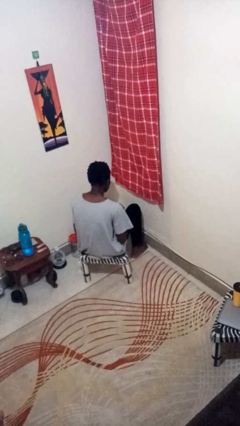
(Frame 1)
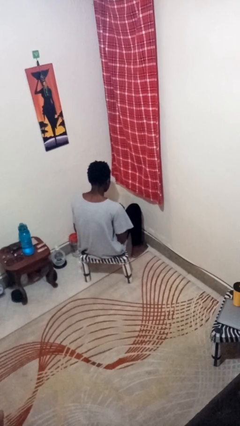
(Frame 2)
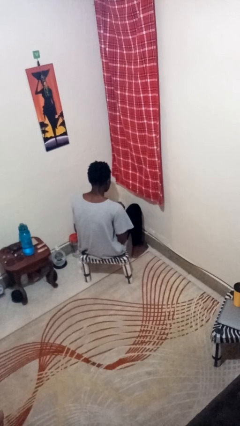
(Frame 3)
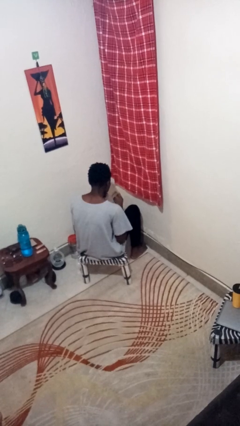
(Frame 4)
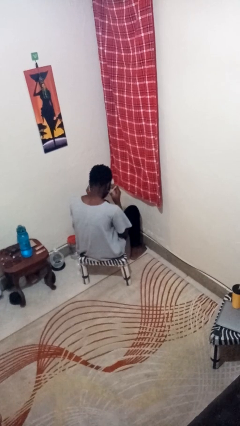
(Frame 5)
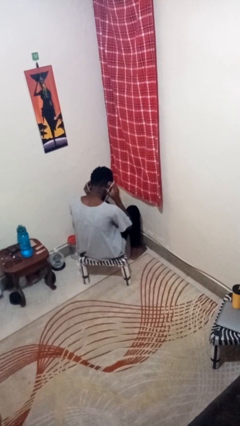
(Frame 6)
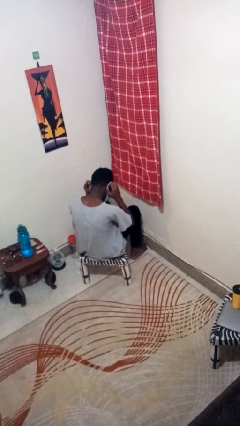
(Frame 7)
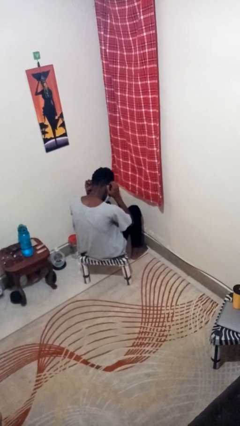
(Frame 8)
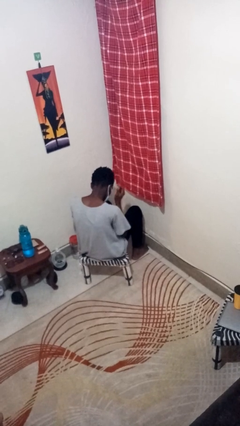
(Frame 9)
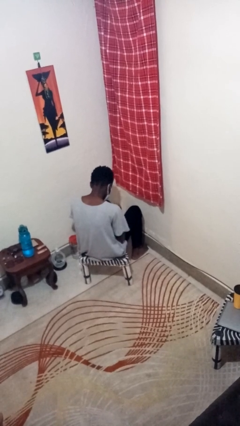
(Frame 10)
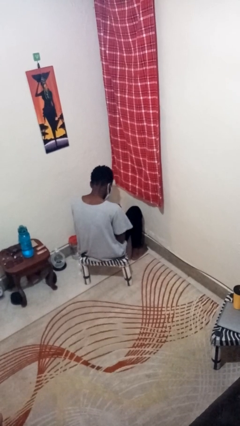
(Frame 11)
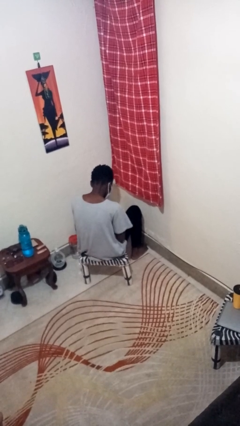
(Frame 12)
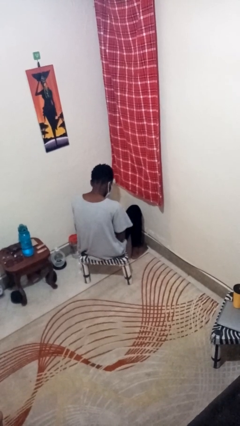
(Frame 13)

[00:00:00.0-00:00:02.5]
person puts on facemask

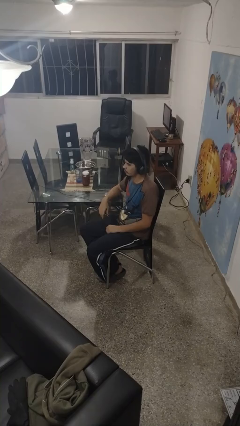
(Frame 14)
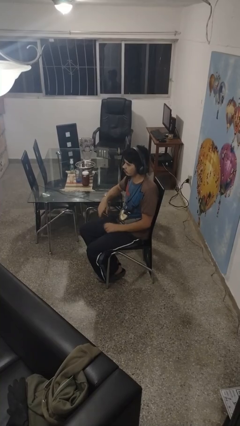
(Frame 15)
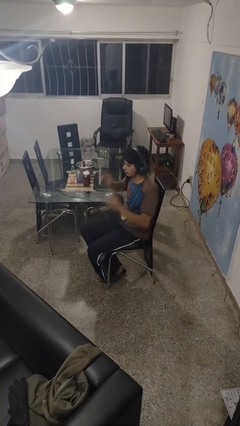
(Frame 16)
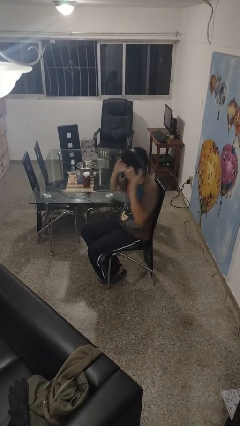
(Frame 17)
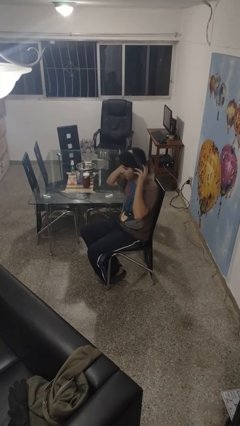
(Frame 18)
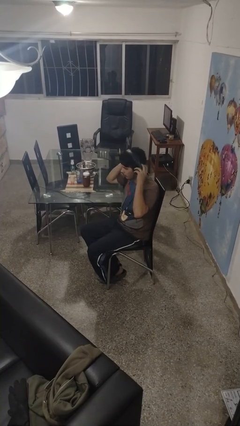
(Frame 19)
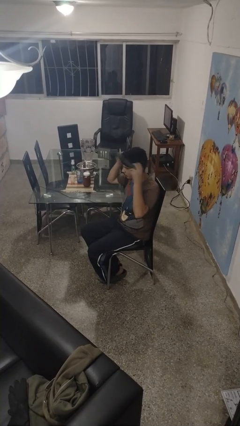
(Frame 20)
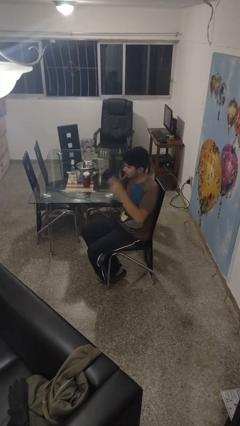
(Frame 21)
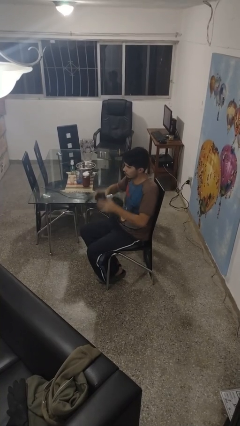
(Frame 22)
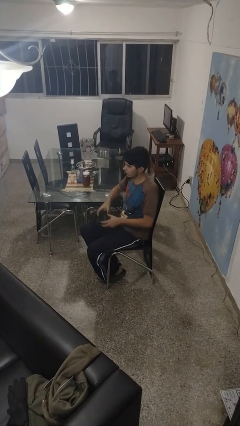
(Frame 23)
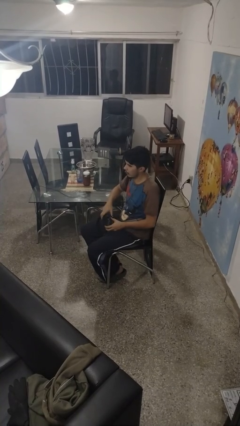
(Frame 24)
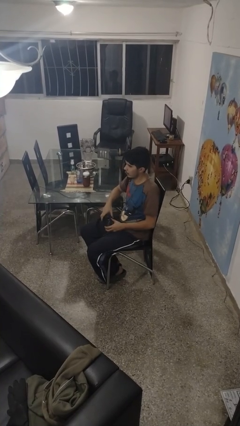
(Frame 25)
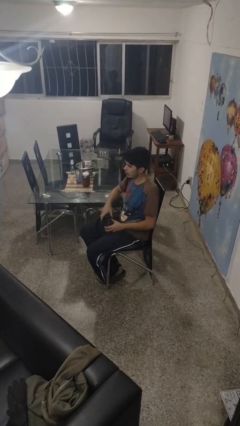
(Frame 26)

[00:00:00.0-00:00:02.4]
person takes off headphones

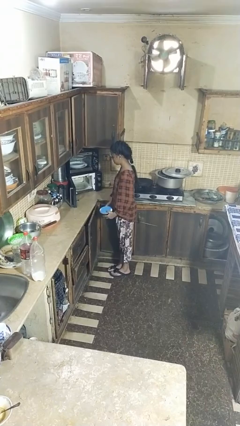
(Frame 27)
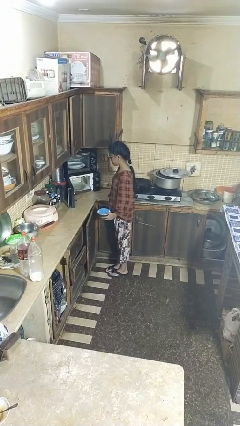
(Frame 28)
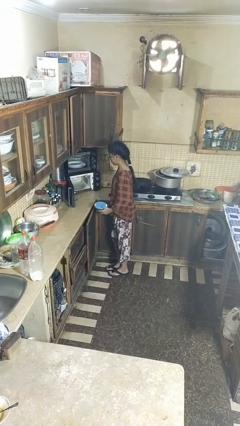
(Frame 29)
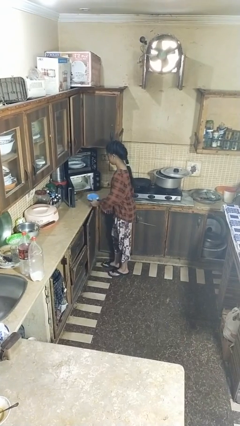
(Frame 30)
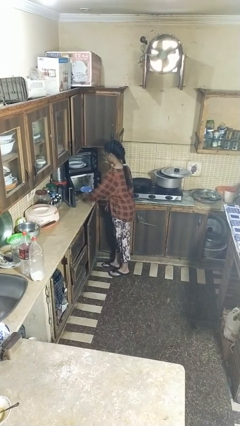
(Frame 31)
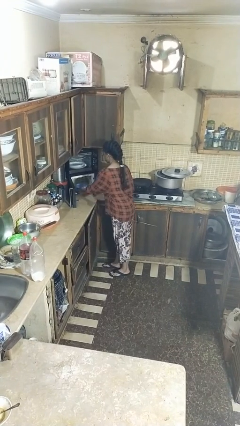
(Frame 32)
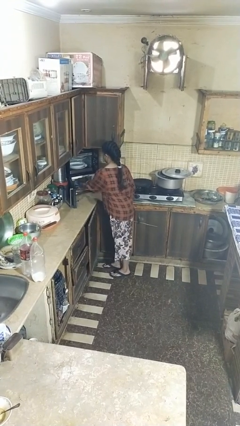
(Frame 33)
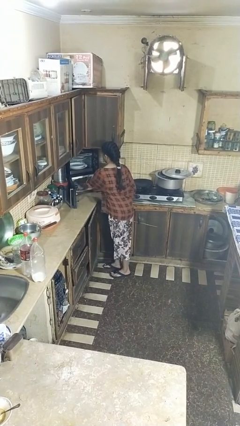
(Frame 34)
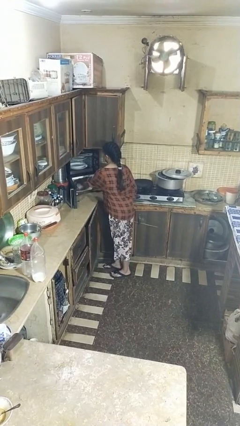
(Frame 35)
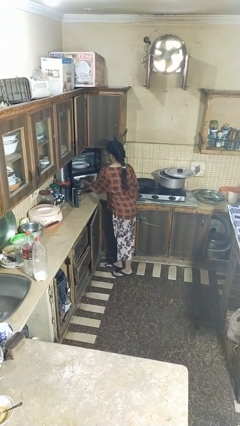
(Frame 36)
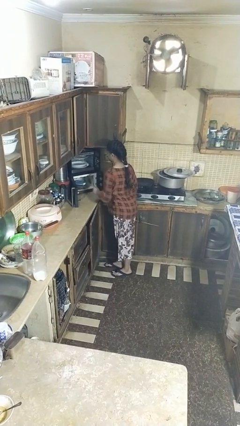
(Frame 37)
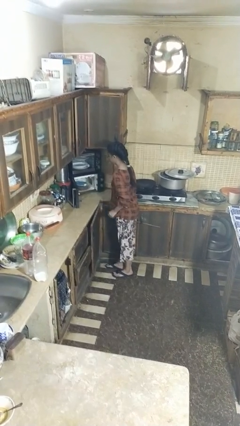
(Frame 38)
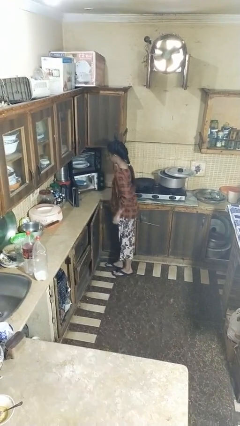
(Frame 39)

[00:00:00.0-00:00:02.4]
person puts object into microwave

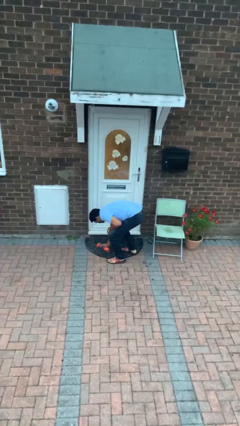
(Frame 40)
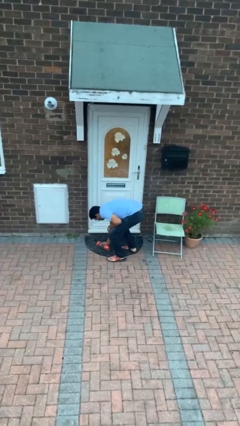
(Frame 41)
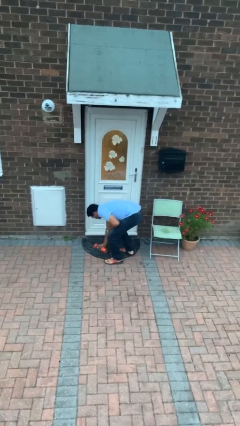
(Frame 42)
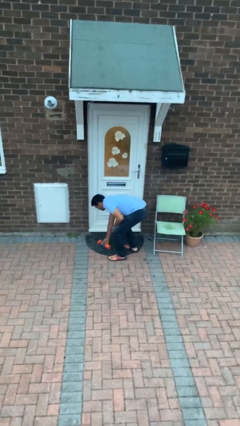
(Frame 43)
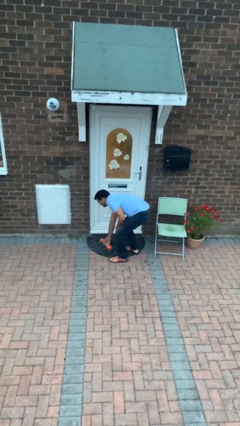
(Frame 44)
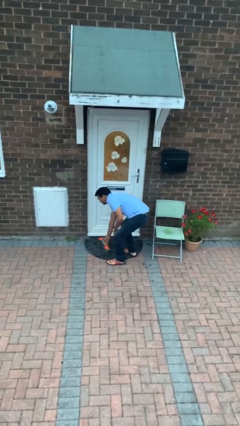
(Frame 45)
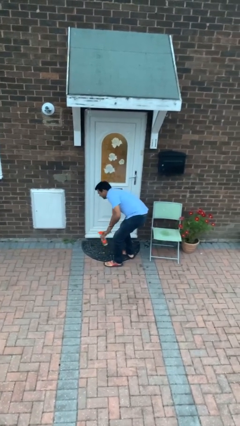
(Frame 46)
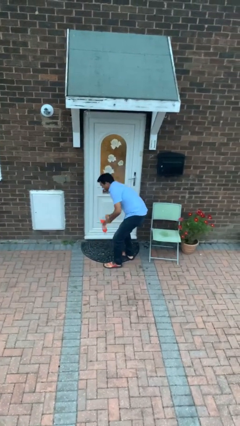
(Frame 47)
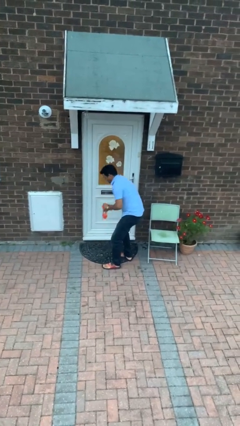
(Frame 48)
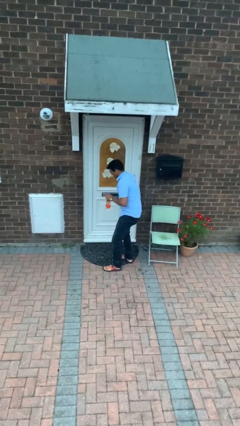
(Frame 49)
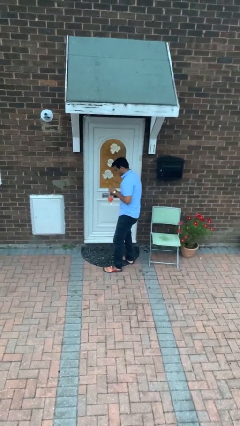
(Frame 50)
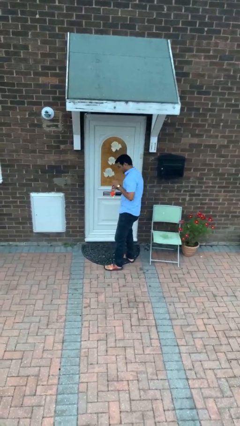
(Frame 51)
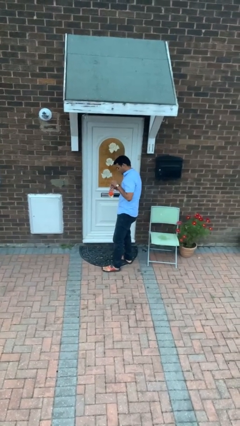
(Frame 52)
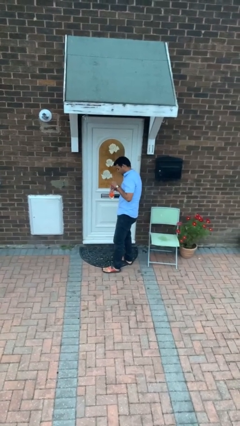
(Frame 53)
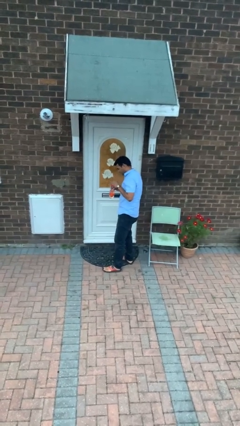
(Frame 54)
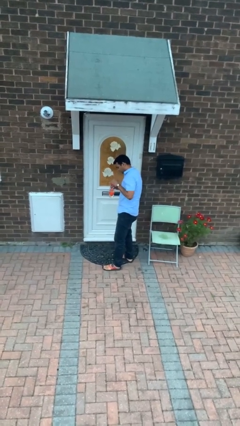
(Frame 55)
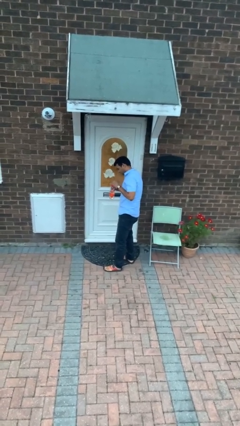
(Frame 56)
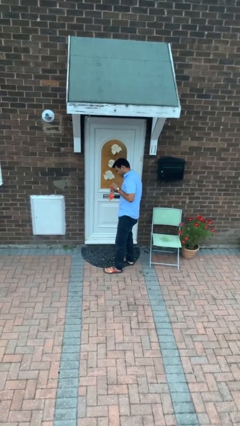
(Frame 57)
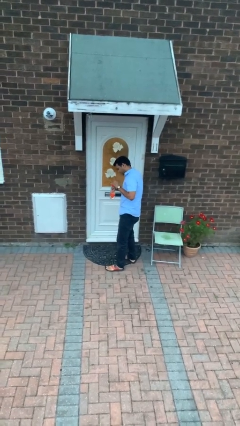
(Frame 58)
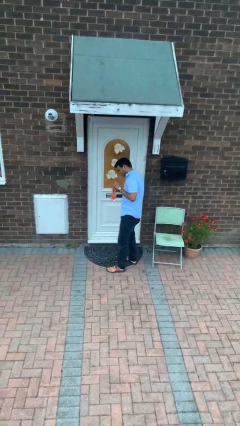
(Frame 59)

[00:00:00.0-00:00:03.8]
person picks up object from floor

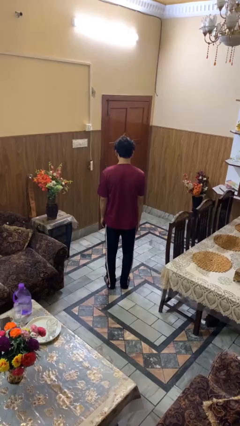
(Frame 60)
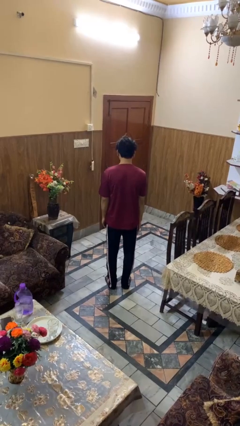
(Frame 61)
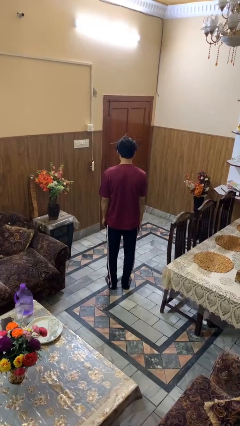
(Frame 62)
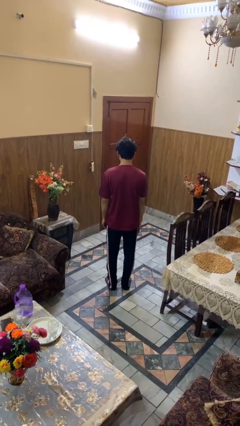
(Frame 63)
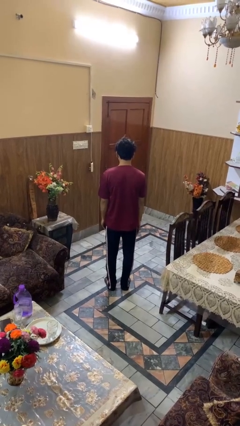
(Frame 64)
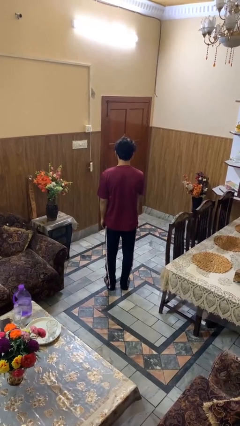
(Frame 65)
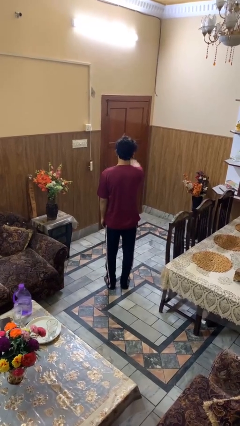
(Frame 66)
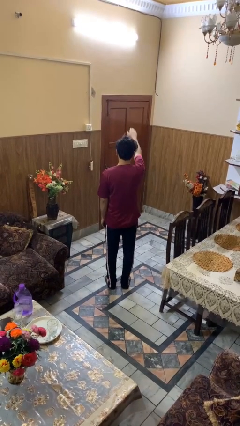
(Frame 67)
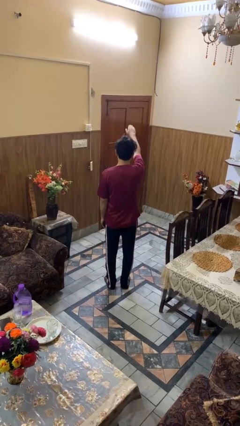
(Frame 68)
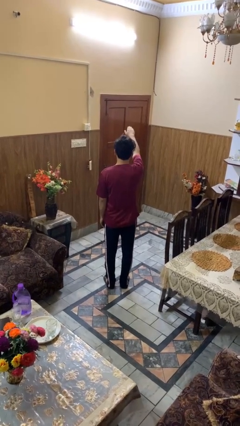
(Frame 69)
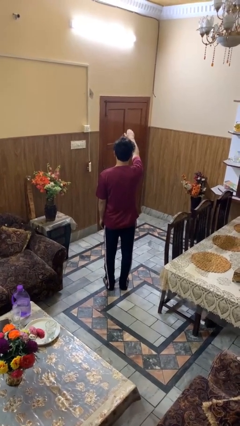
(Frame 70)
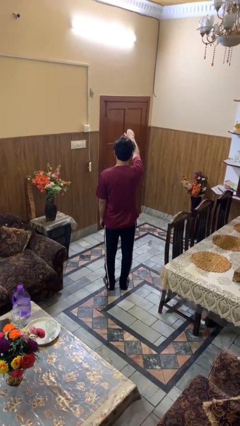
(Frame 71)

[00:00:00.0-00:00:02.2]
person gestures swipe up

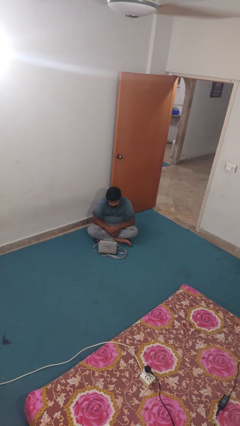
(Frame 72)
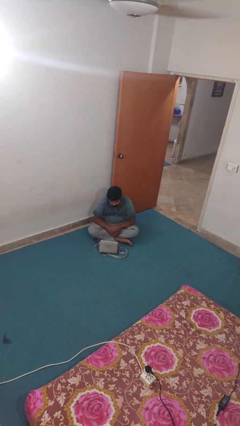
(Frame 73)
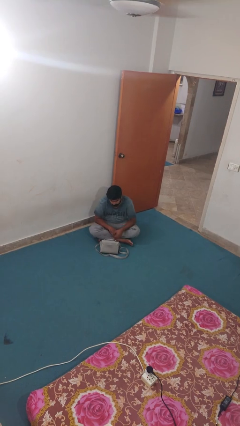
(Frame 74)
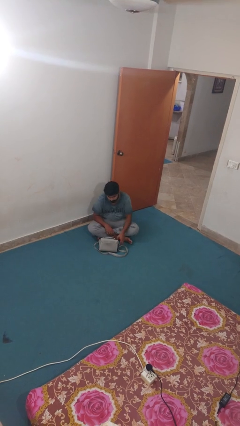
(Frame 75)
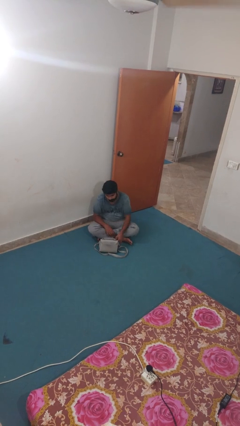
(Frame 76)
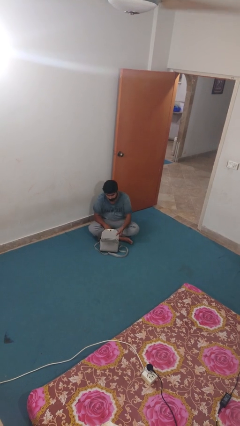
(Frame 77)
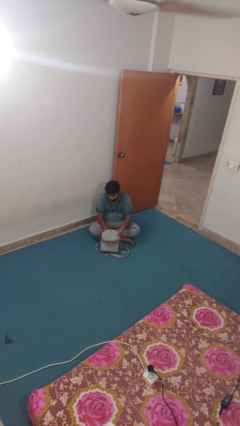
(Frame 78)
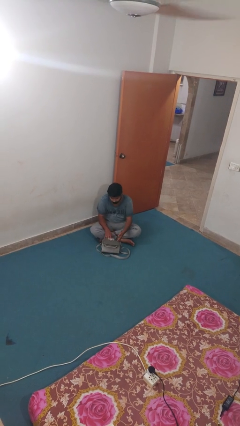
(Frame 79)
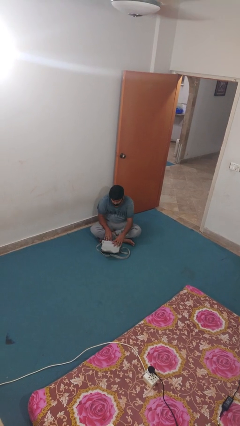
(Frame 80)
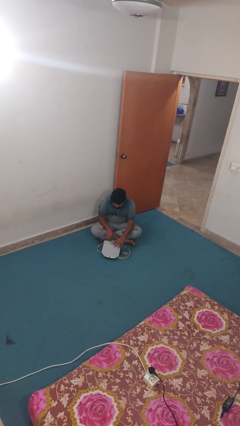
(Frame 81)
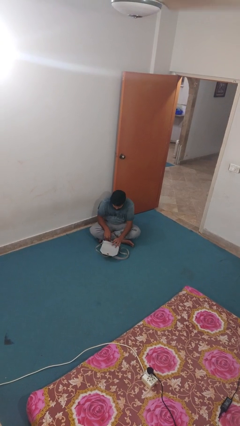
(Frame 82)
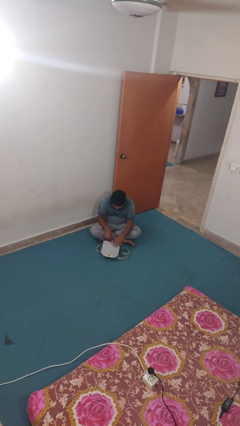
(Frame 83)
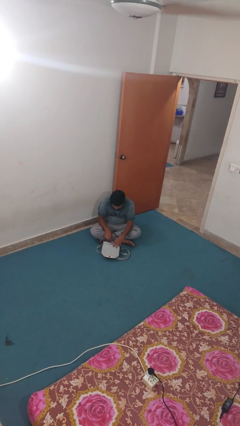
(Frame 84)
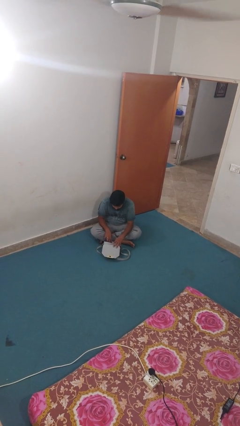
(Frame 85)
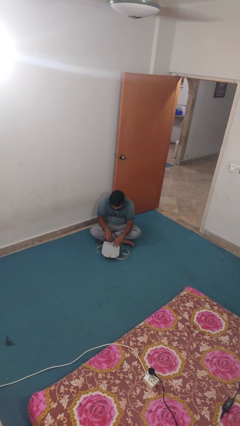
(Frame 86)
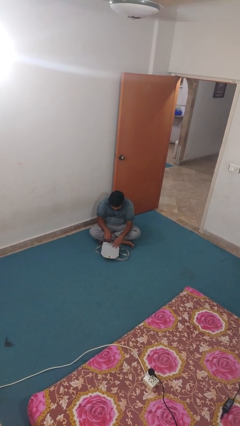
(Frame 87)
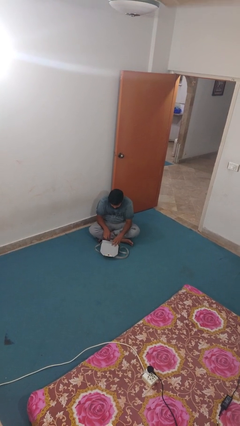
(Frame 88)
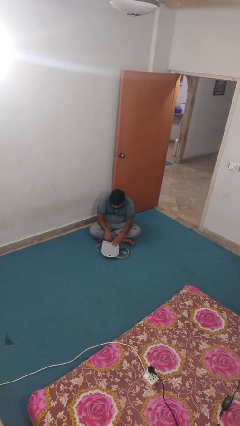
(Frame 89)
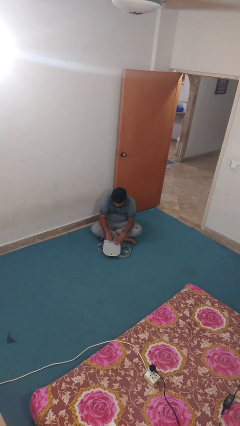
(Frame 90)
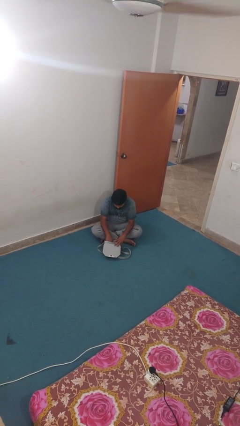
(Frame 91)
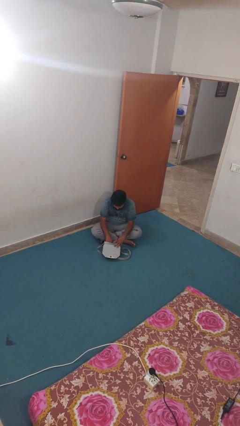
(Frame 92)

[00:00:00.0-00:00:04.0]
person searches in purse
